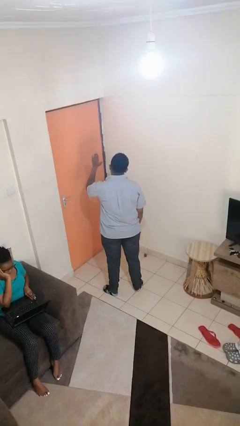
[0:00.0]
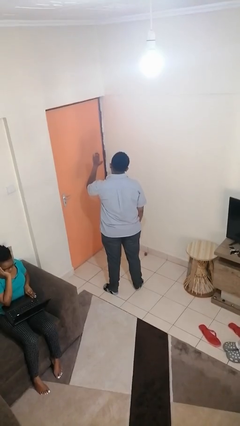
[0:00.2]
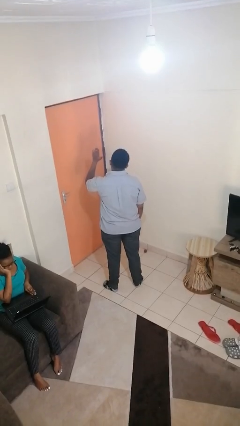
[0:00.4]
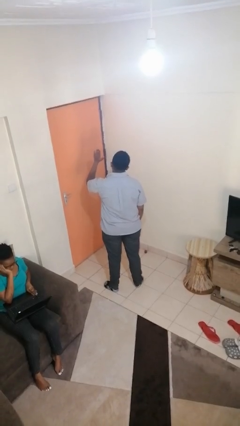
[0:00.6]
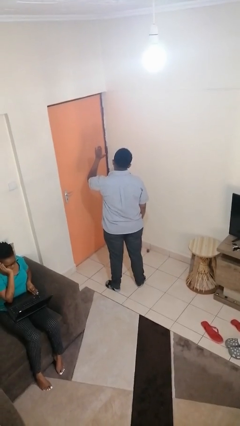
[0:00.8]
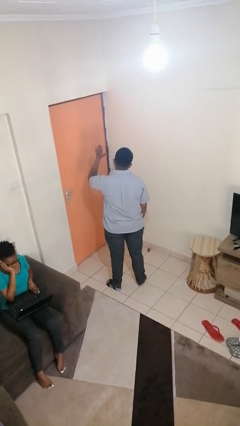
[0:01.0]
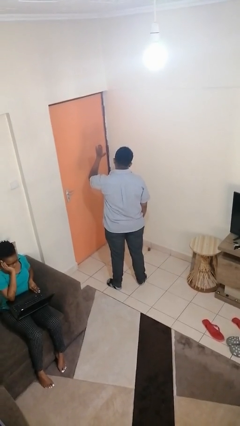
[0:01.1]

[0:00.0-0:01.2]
person exercises with jumping jacks

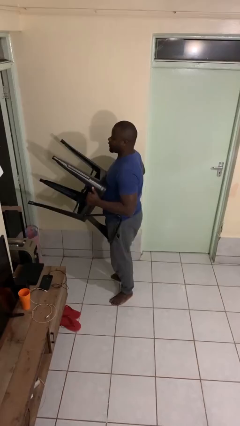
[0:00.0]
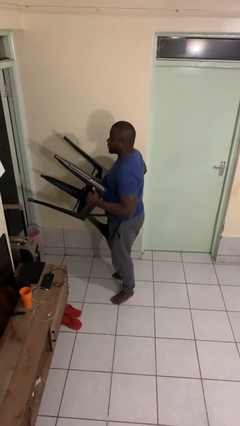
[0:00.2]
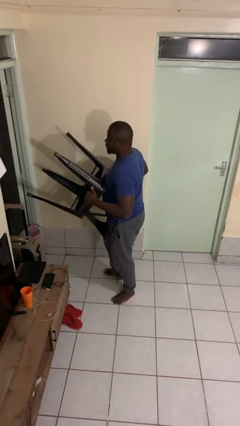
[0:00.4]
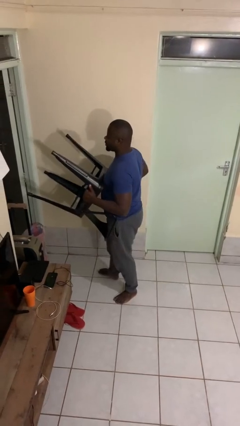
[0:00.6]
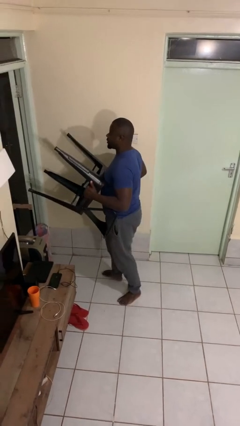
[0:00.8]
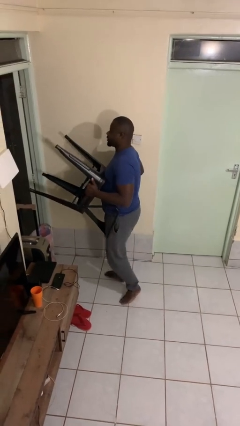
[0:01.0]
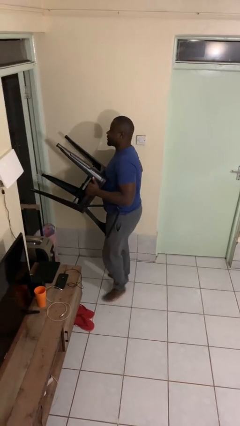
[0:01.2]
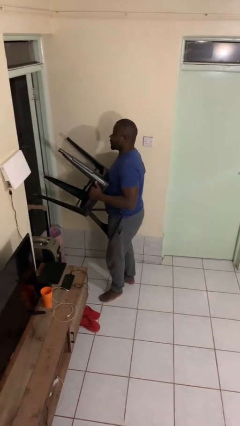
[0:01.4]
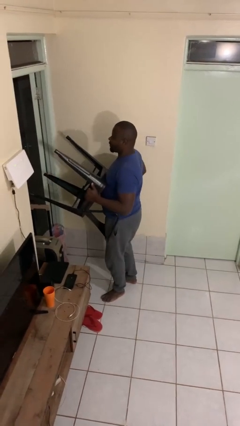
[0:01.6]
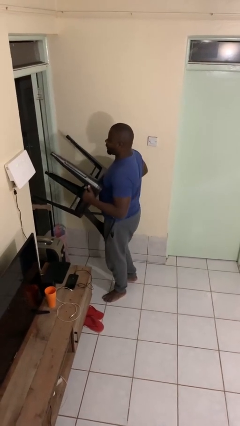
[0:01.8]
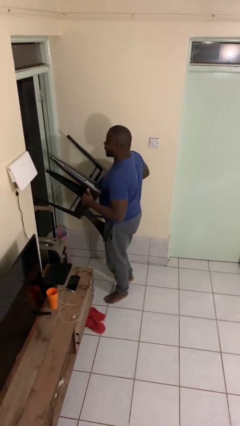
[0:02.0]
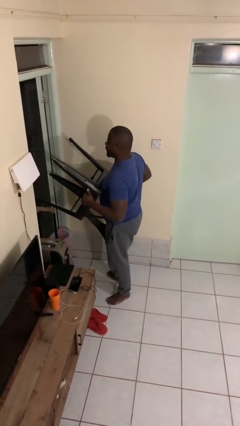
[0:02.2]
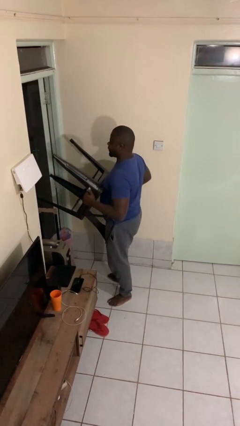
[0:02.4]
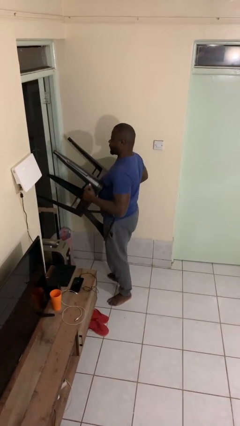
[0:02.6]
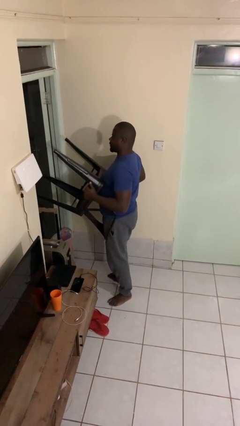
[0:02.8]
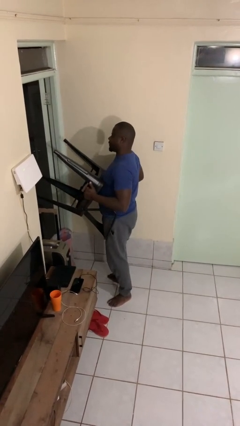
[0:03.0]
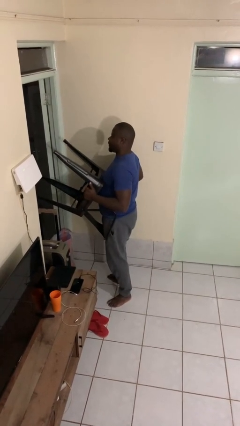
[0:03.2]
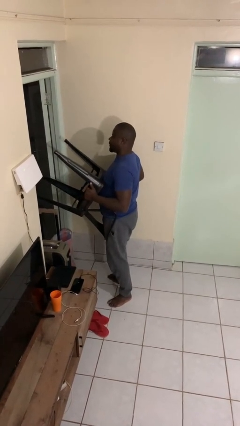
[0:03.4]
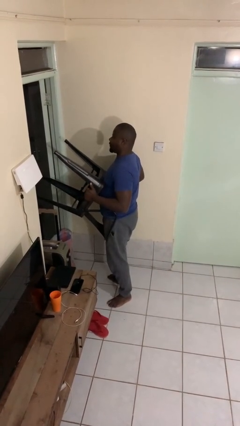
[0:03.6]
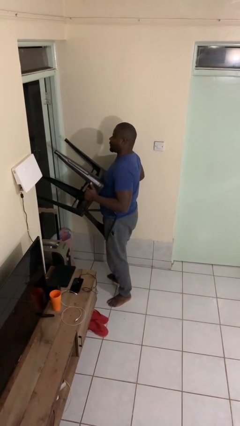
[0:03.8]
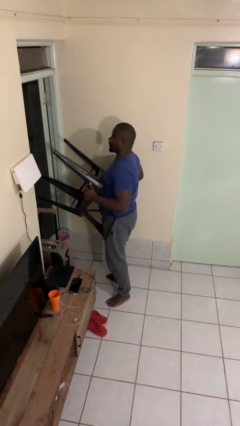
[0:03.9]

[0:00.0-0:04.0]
person carries furniture

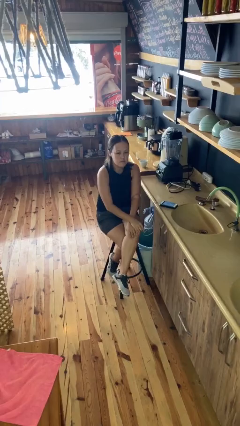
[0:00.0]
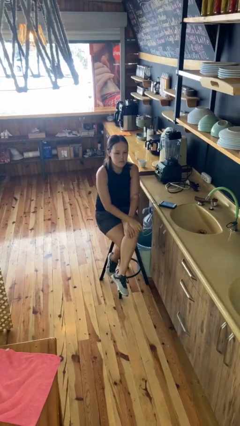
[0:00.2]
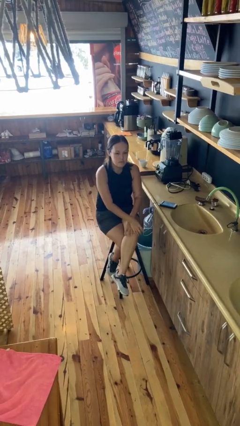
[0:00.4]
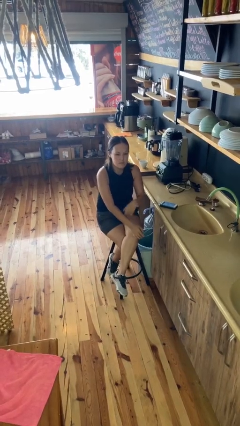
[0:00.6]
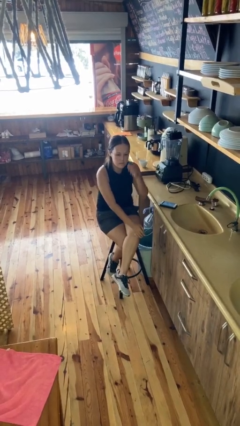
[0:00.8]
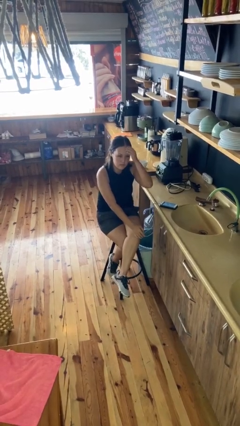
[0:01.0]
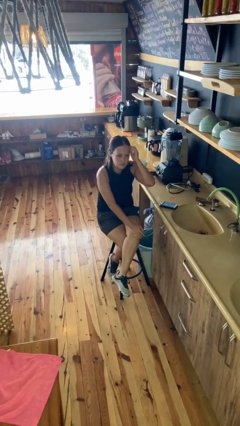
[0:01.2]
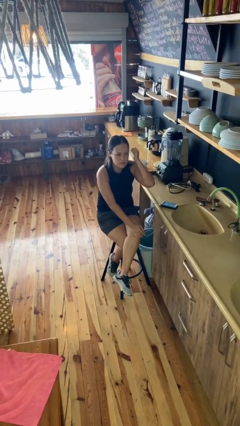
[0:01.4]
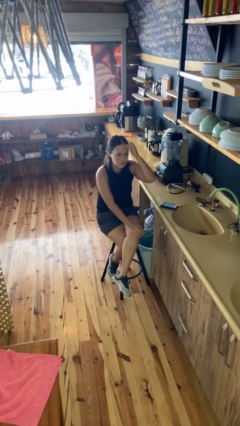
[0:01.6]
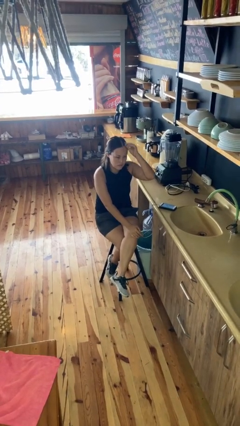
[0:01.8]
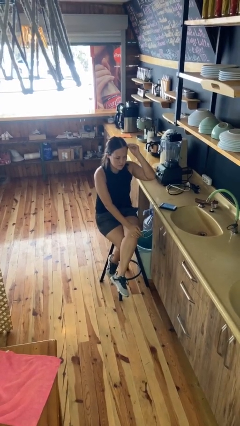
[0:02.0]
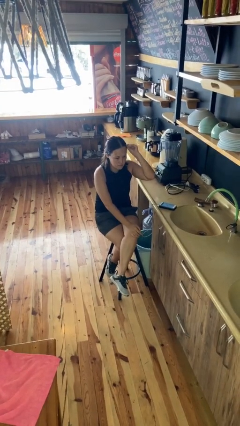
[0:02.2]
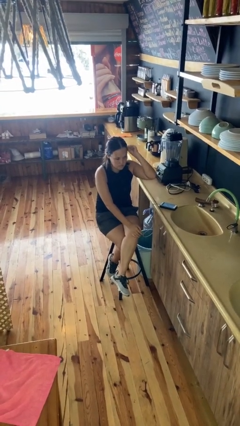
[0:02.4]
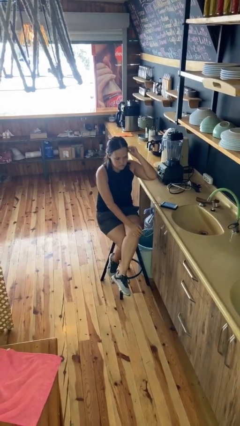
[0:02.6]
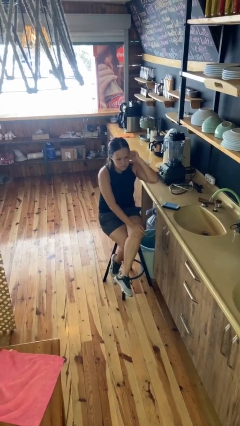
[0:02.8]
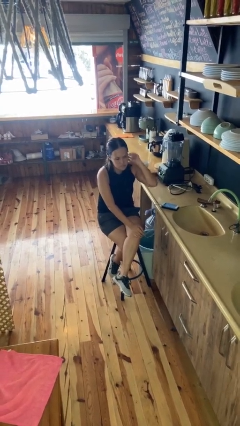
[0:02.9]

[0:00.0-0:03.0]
person strokes hair

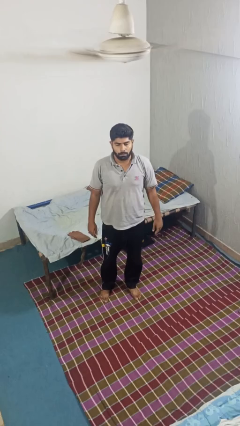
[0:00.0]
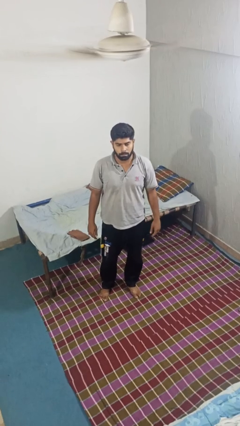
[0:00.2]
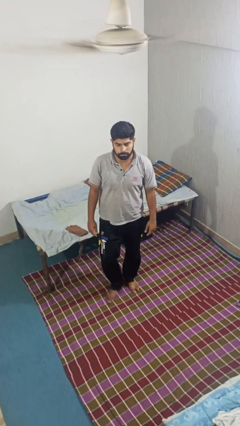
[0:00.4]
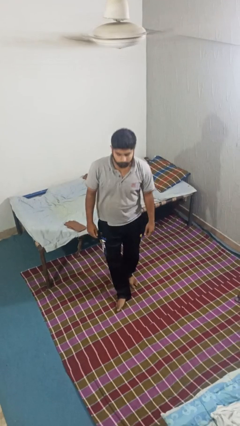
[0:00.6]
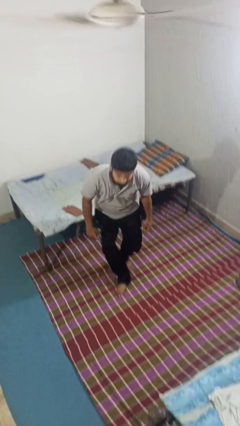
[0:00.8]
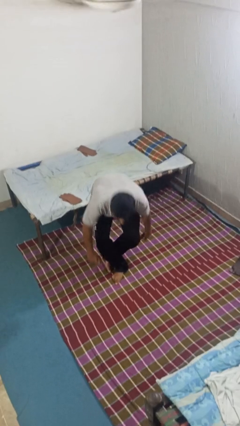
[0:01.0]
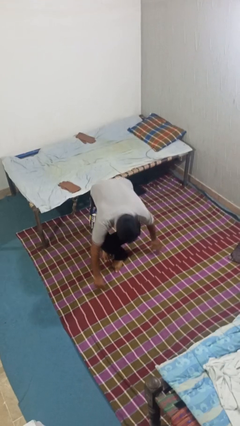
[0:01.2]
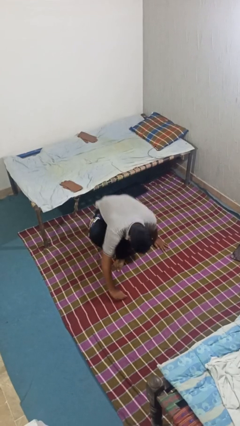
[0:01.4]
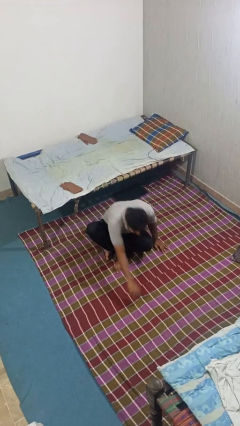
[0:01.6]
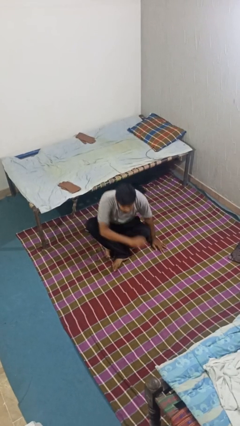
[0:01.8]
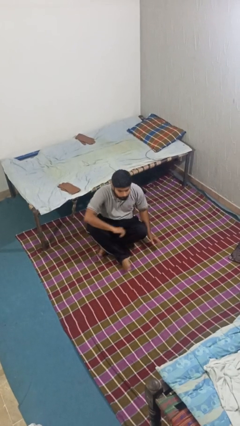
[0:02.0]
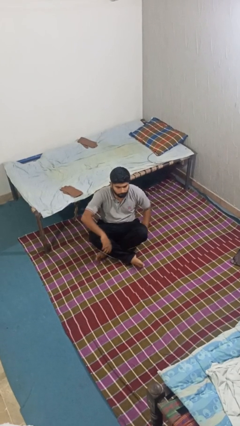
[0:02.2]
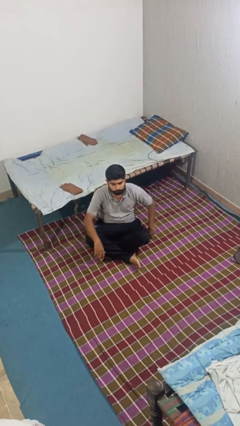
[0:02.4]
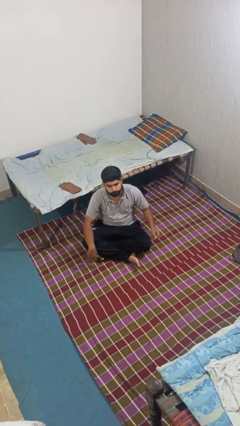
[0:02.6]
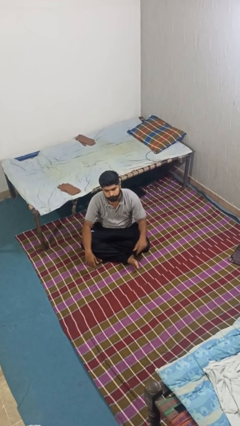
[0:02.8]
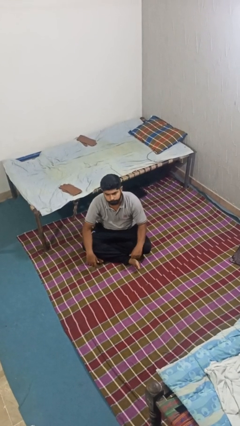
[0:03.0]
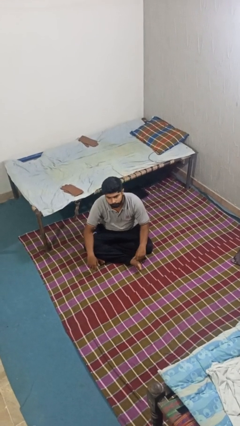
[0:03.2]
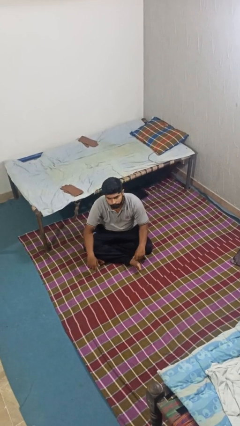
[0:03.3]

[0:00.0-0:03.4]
person sits crisscross

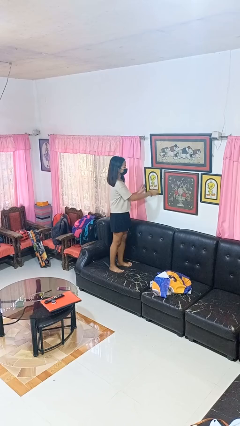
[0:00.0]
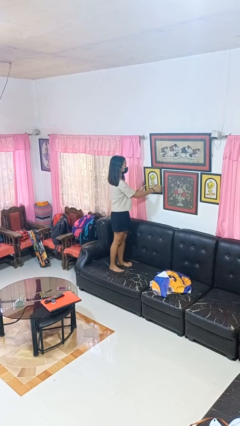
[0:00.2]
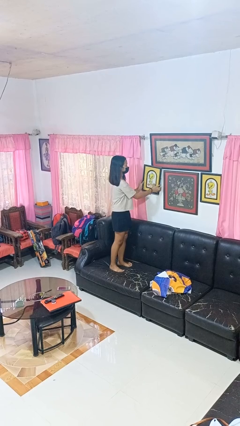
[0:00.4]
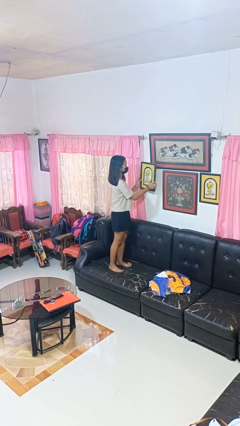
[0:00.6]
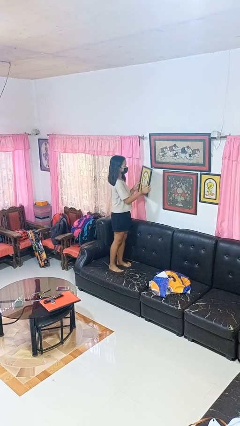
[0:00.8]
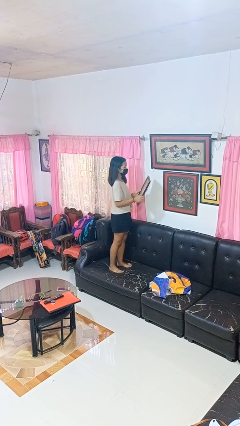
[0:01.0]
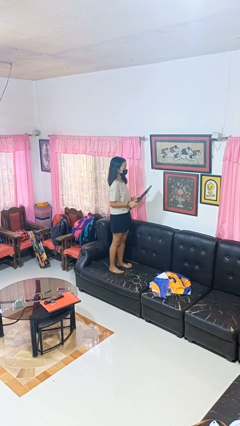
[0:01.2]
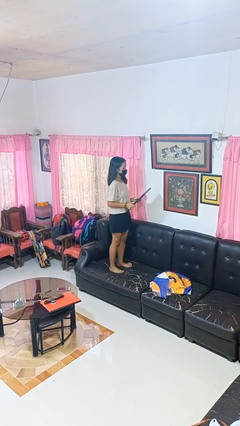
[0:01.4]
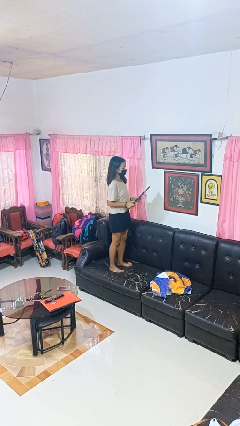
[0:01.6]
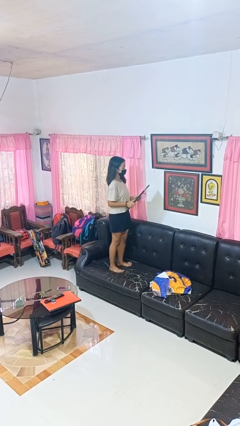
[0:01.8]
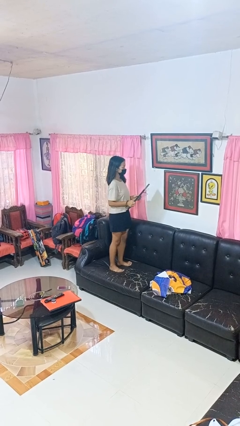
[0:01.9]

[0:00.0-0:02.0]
person takes down picture frame

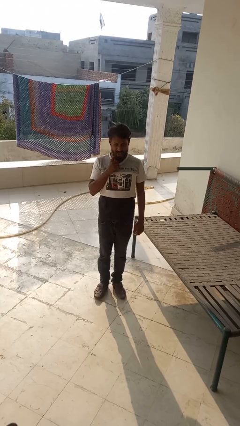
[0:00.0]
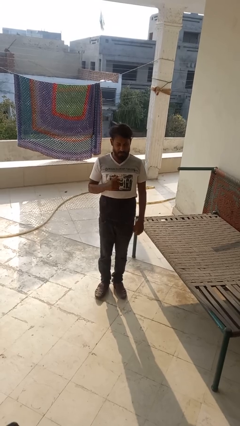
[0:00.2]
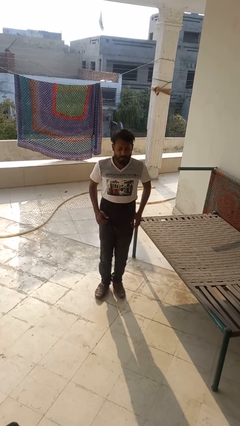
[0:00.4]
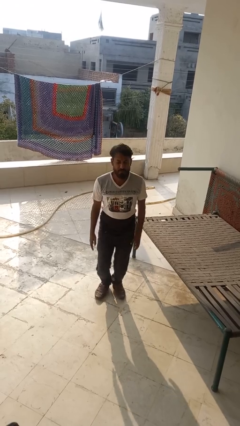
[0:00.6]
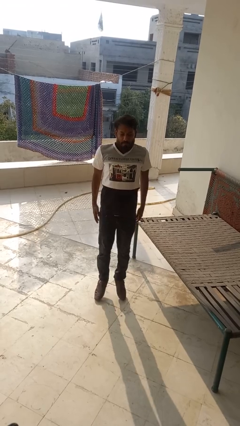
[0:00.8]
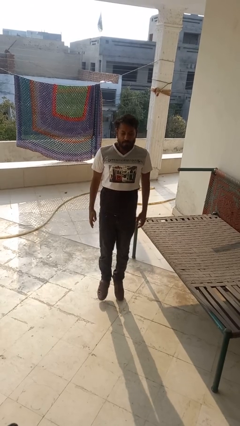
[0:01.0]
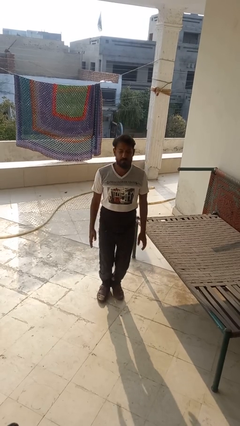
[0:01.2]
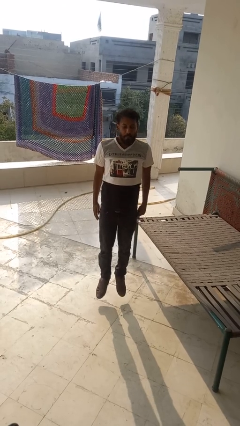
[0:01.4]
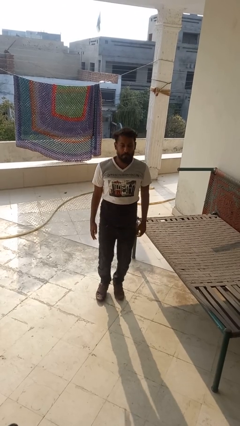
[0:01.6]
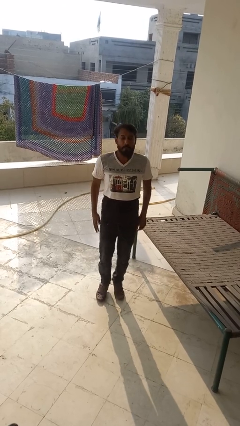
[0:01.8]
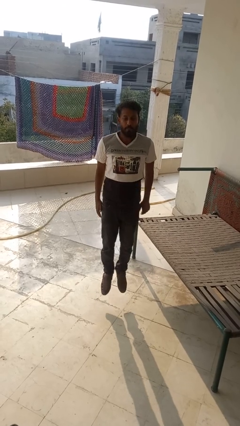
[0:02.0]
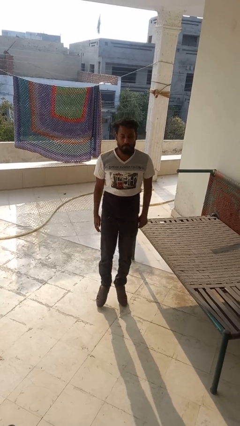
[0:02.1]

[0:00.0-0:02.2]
person jumps

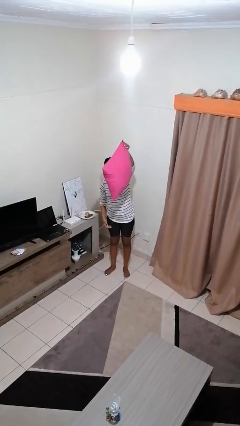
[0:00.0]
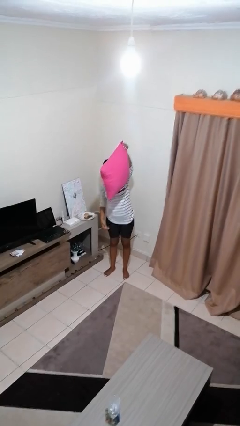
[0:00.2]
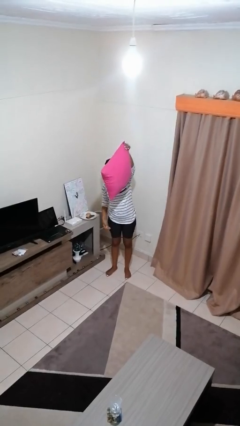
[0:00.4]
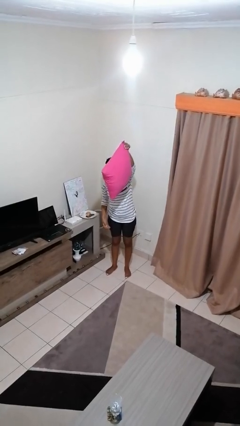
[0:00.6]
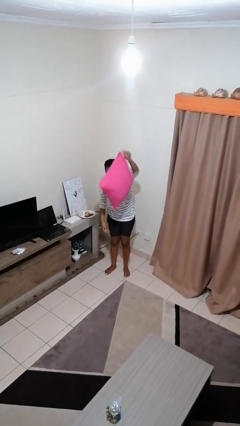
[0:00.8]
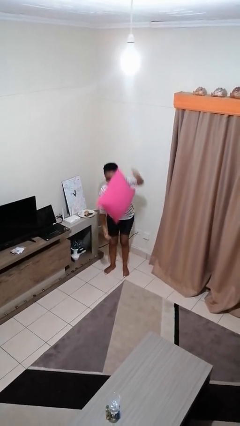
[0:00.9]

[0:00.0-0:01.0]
person drops object
